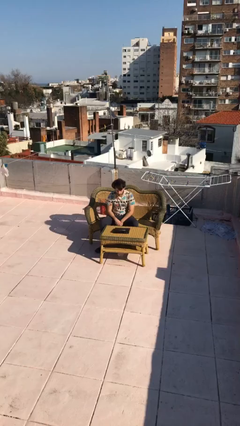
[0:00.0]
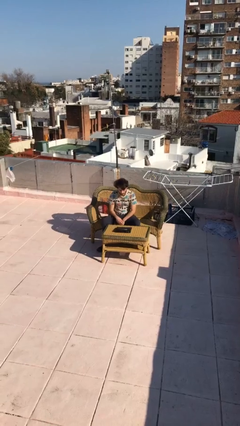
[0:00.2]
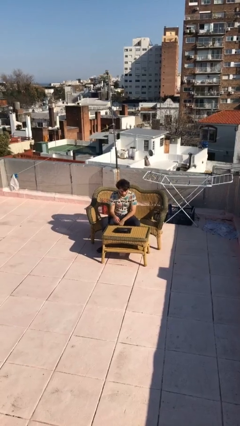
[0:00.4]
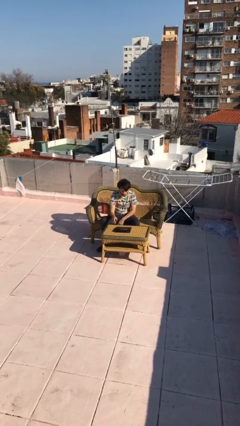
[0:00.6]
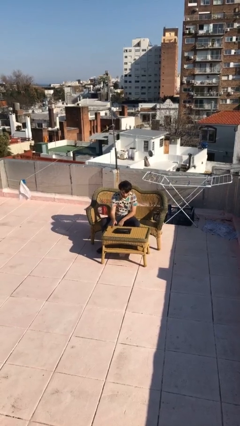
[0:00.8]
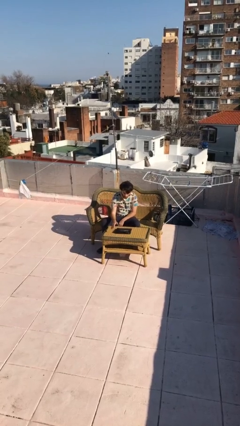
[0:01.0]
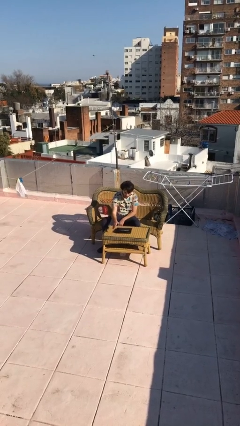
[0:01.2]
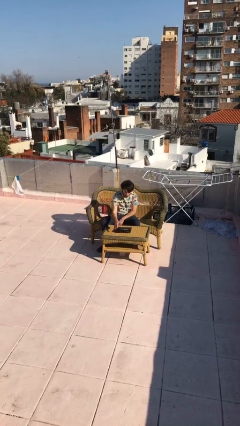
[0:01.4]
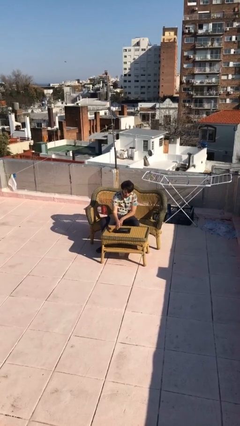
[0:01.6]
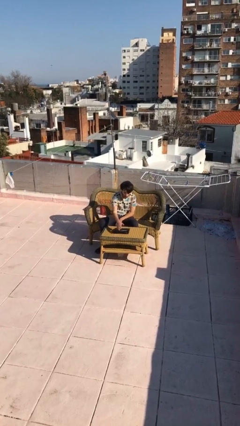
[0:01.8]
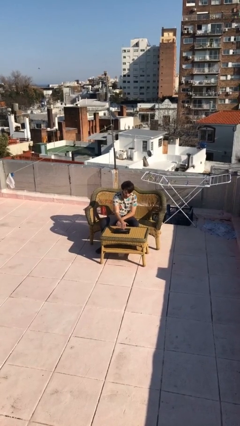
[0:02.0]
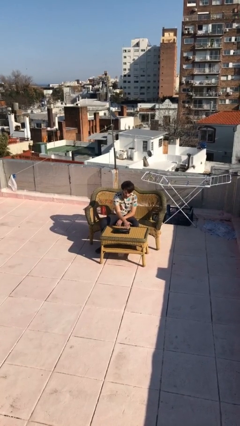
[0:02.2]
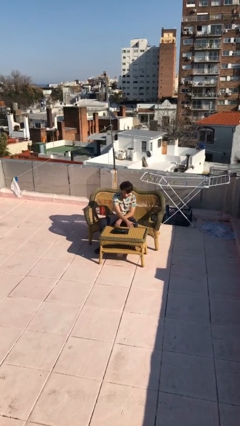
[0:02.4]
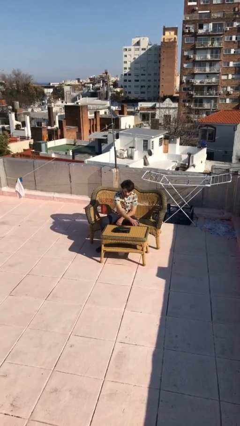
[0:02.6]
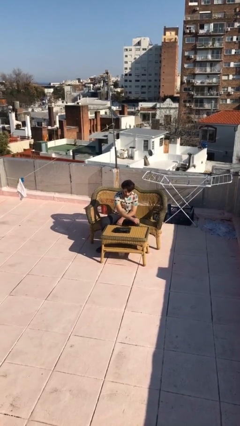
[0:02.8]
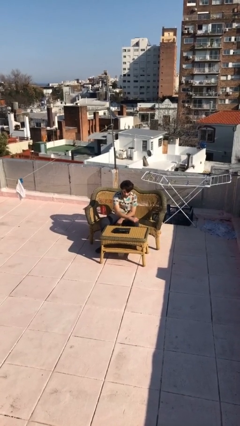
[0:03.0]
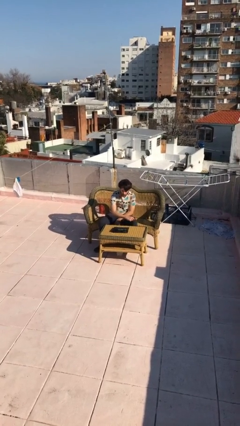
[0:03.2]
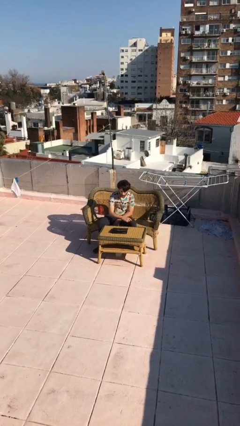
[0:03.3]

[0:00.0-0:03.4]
person waves hand over object

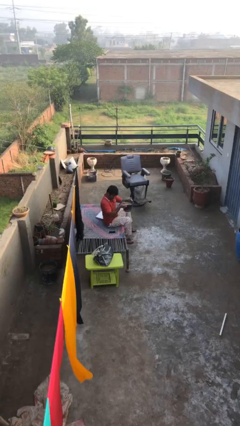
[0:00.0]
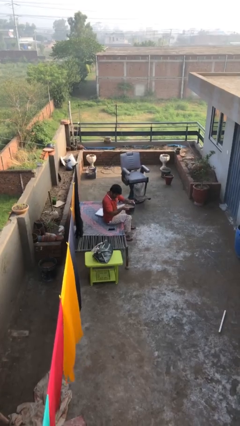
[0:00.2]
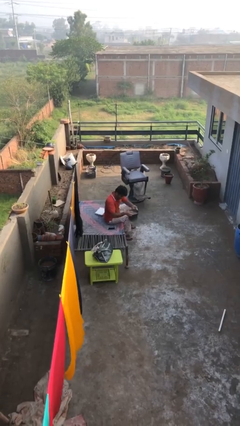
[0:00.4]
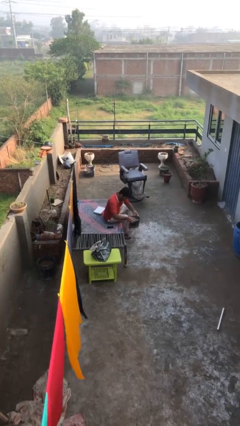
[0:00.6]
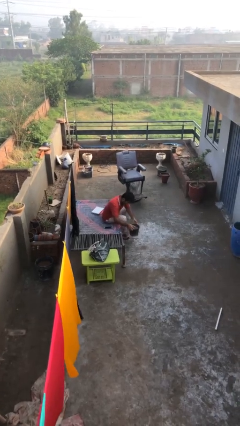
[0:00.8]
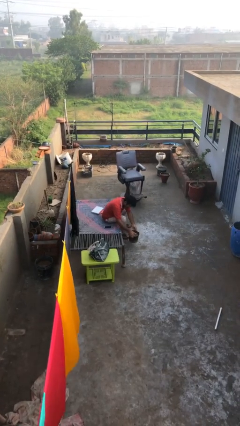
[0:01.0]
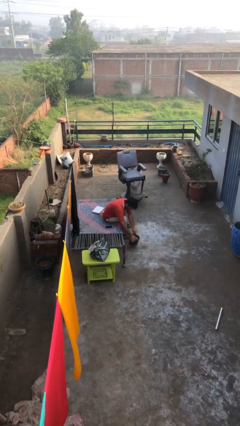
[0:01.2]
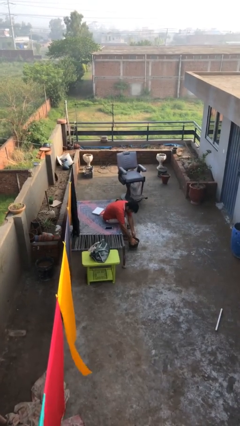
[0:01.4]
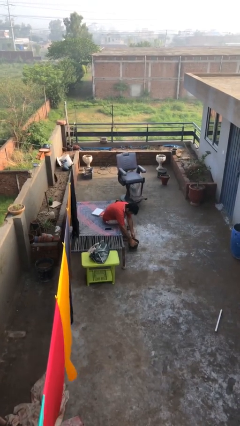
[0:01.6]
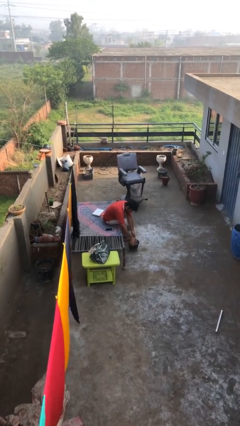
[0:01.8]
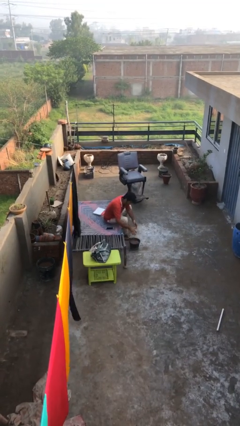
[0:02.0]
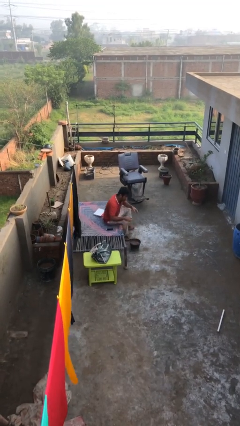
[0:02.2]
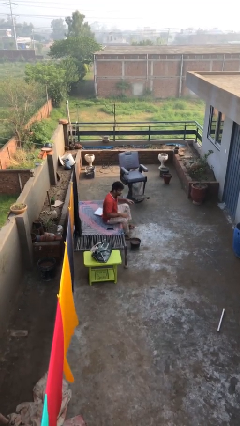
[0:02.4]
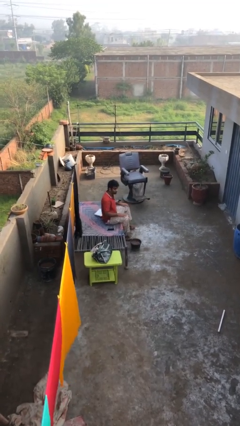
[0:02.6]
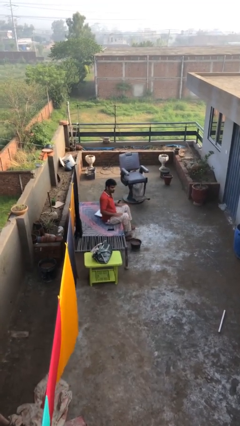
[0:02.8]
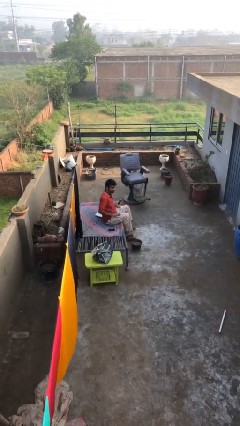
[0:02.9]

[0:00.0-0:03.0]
person puts down object on floor

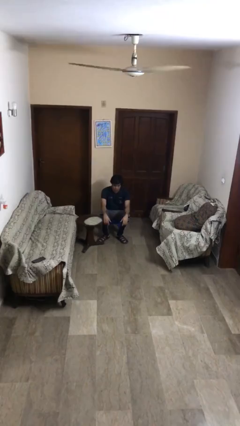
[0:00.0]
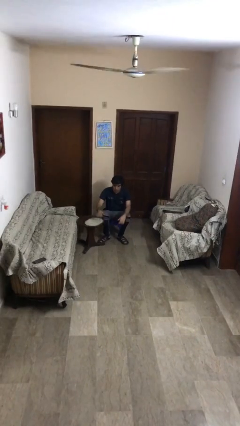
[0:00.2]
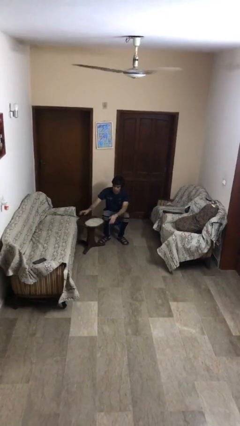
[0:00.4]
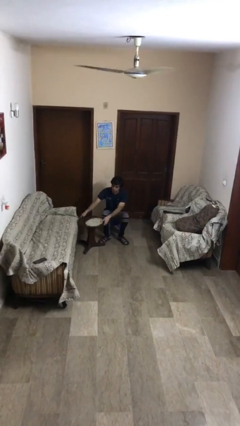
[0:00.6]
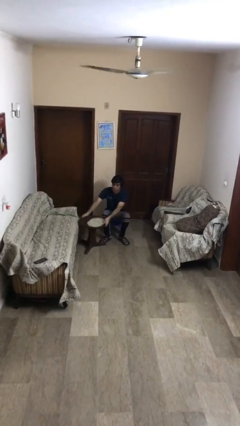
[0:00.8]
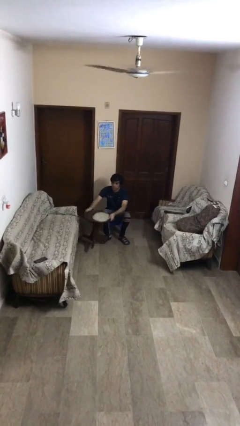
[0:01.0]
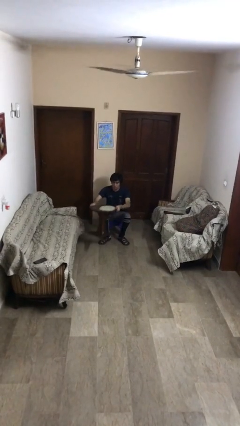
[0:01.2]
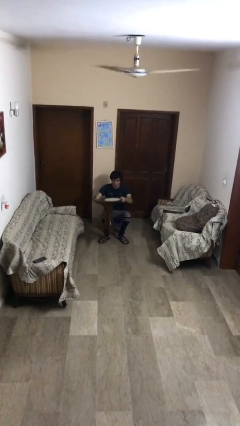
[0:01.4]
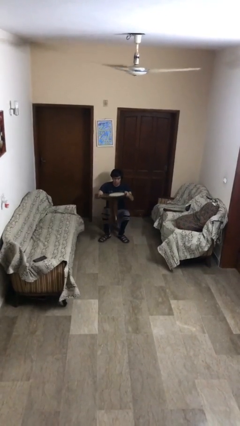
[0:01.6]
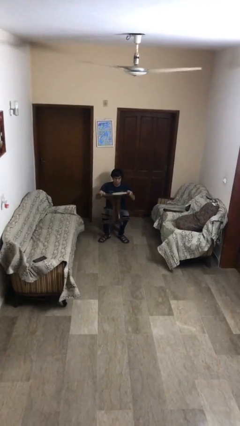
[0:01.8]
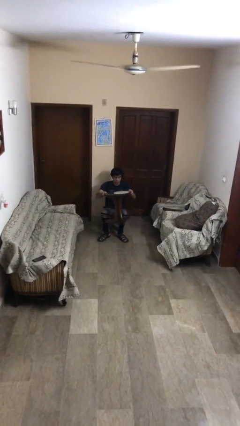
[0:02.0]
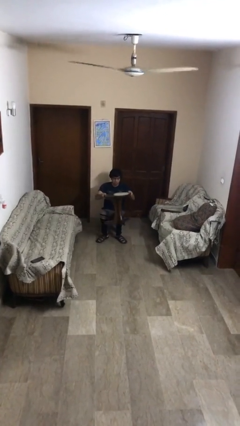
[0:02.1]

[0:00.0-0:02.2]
person picks up object from floor

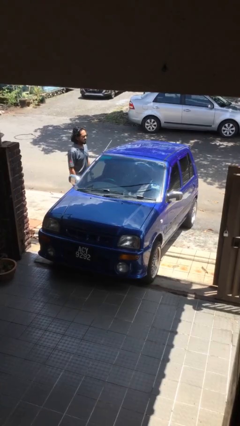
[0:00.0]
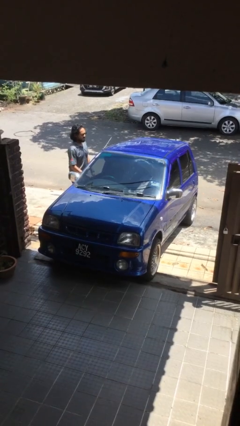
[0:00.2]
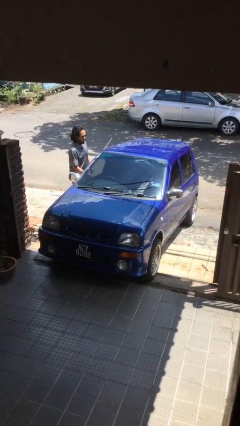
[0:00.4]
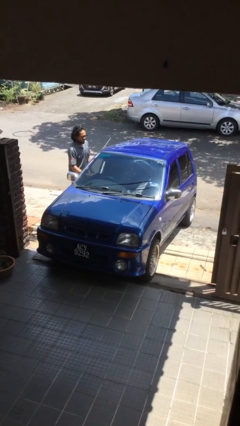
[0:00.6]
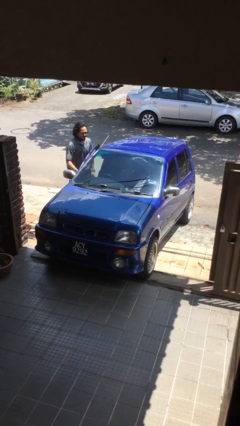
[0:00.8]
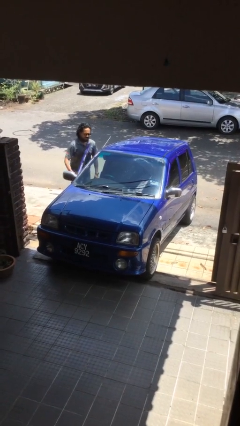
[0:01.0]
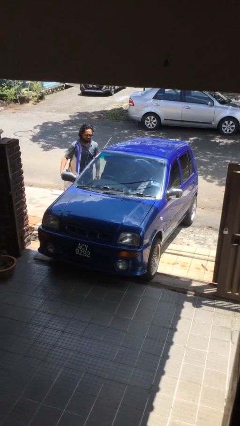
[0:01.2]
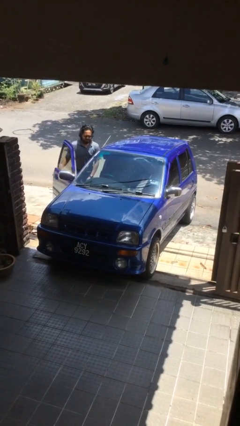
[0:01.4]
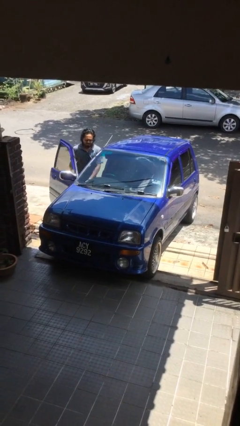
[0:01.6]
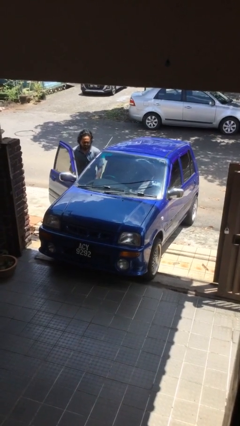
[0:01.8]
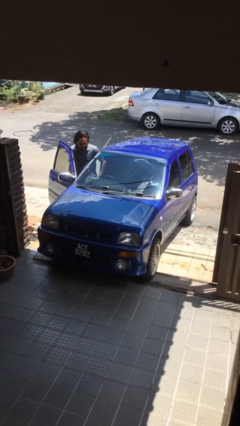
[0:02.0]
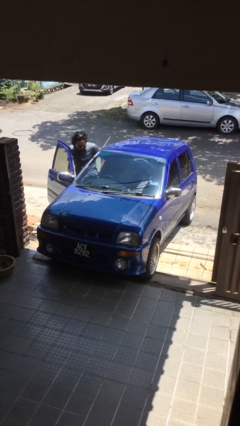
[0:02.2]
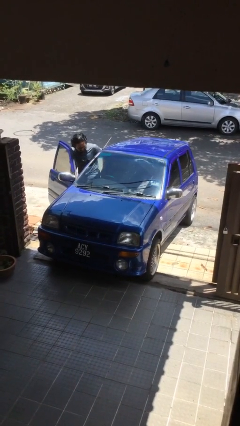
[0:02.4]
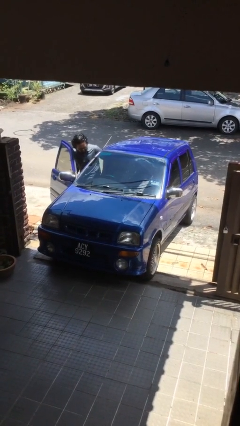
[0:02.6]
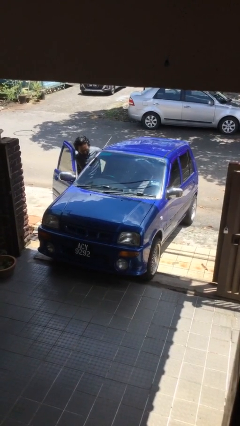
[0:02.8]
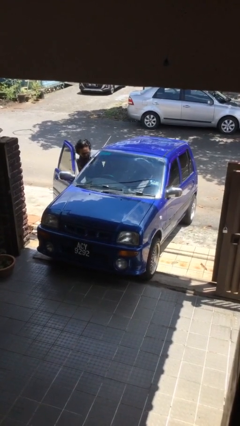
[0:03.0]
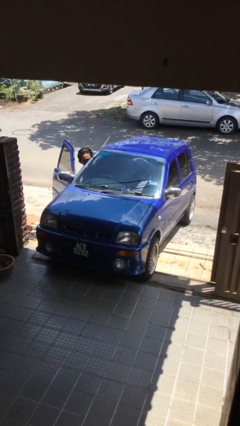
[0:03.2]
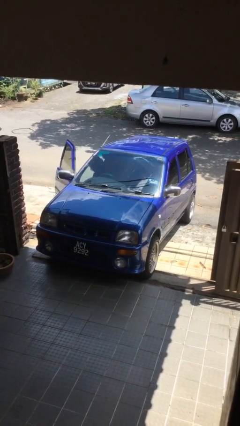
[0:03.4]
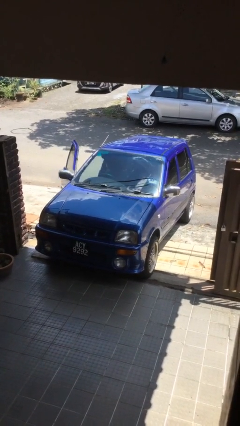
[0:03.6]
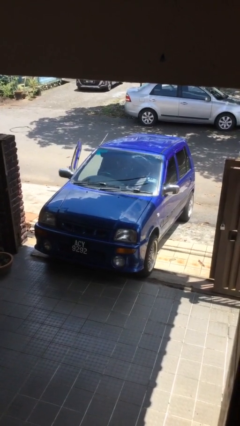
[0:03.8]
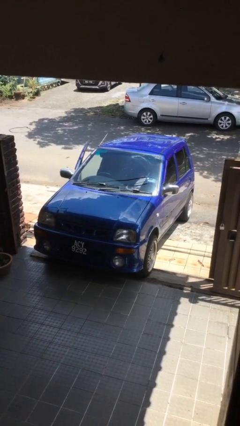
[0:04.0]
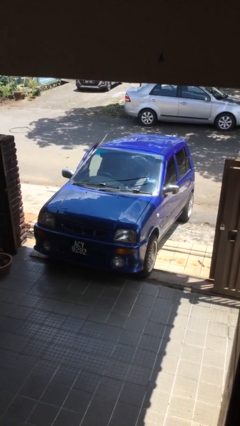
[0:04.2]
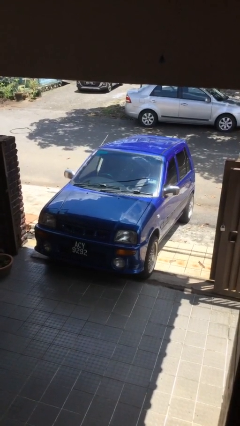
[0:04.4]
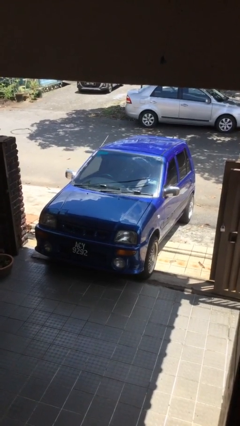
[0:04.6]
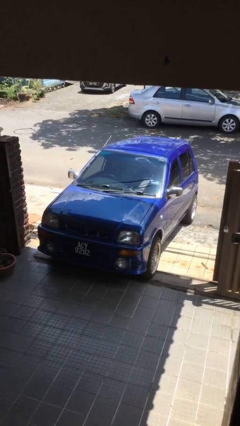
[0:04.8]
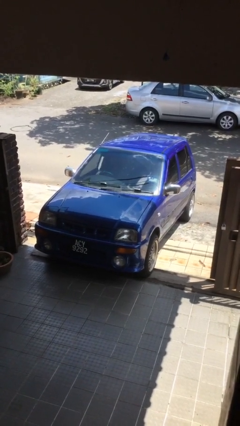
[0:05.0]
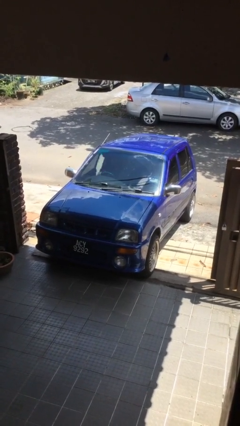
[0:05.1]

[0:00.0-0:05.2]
car picks up person

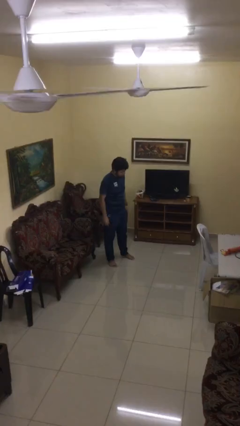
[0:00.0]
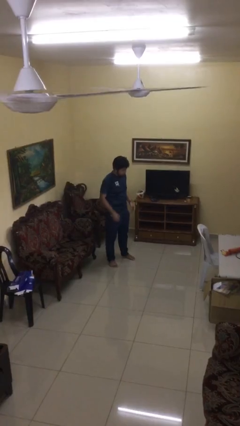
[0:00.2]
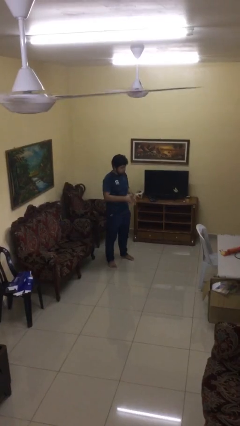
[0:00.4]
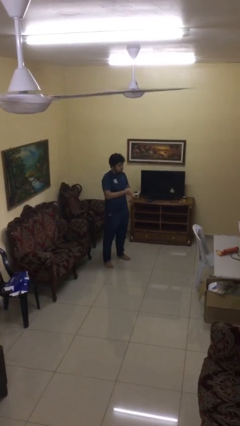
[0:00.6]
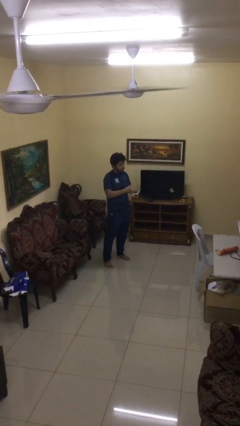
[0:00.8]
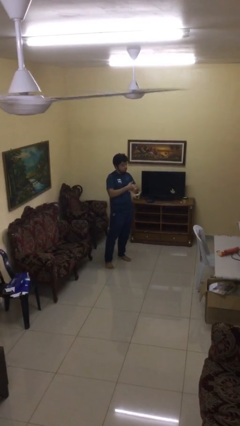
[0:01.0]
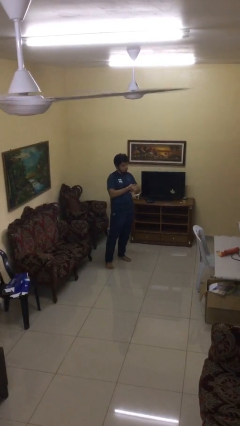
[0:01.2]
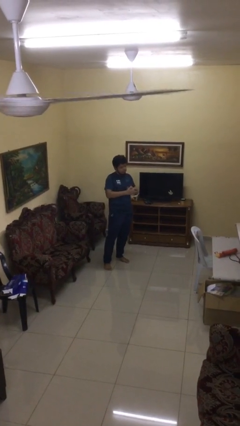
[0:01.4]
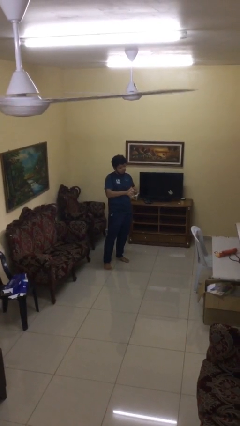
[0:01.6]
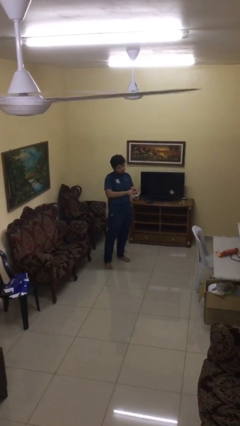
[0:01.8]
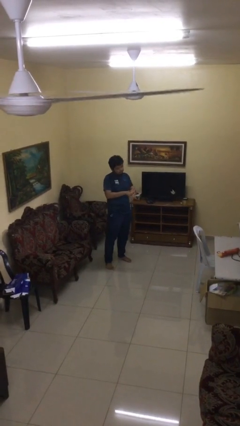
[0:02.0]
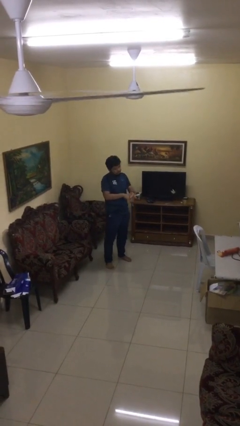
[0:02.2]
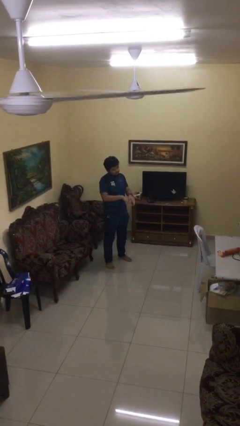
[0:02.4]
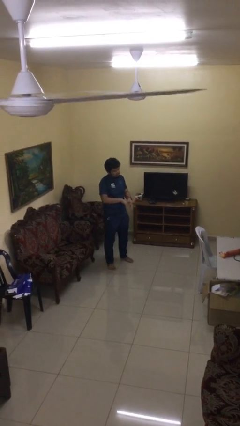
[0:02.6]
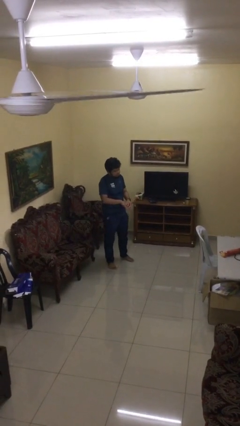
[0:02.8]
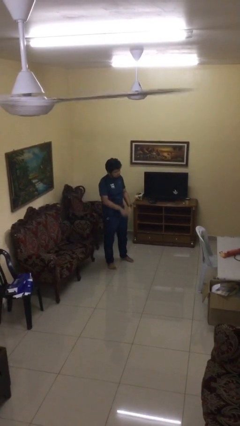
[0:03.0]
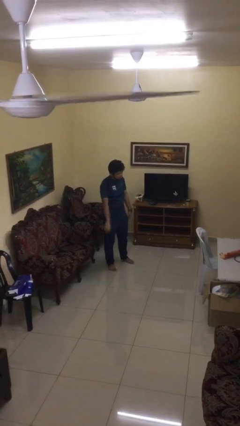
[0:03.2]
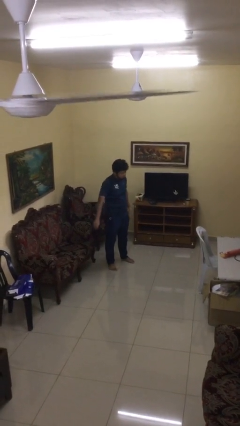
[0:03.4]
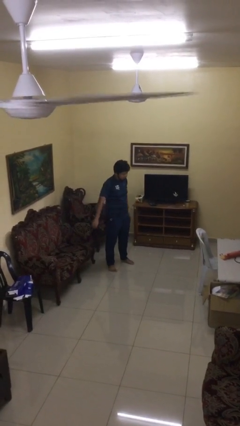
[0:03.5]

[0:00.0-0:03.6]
person cracks knuckles

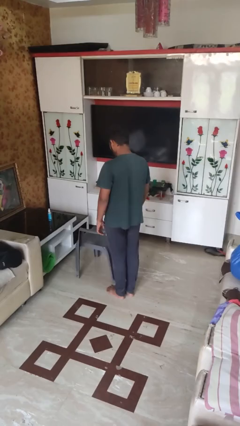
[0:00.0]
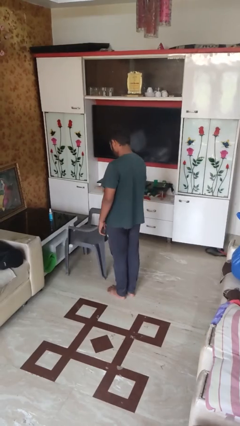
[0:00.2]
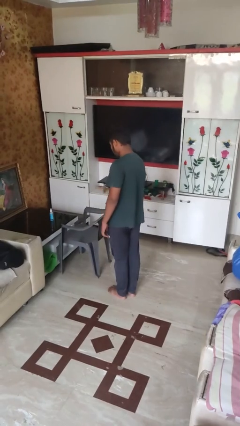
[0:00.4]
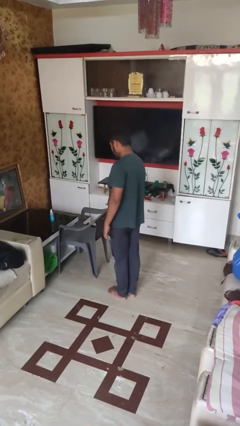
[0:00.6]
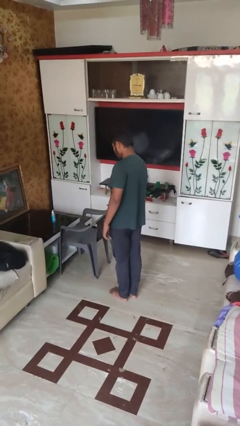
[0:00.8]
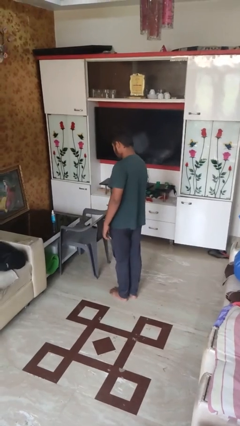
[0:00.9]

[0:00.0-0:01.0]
person pushes in chair
